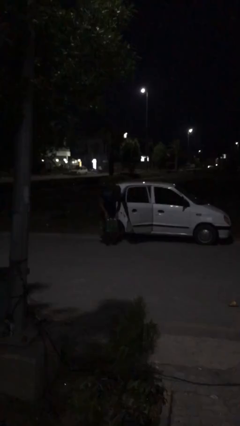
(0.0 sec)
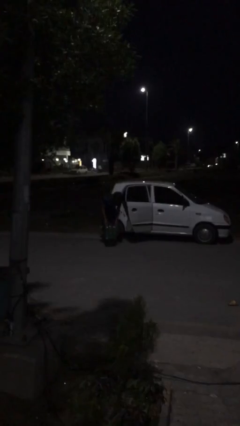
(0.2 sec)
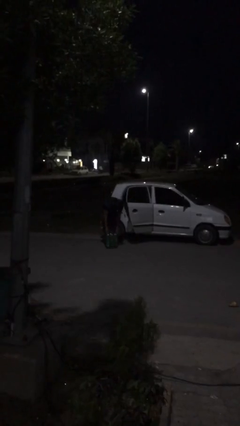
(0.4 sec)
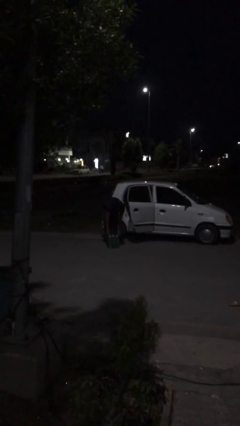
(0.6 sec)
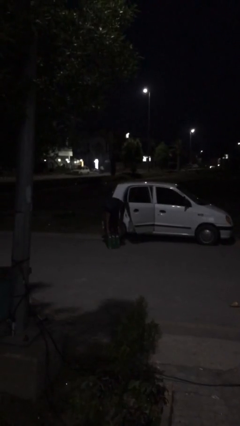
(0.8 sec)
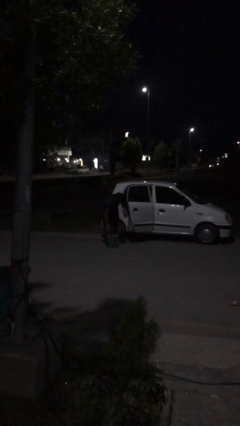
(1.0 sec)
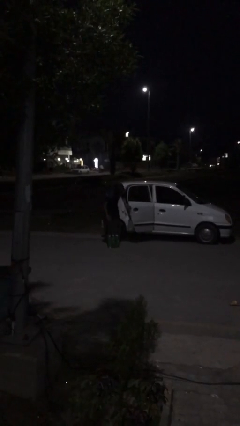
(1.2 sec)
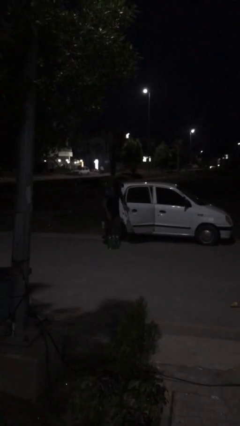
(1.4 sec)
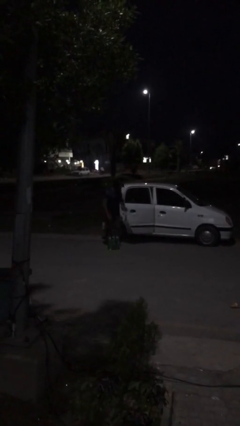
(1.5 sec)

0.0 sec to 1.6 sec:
person unloads car

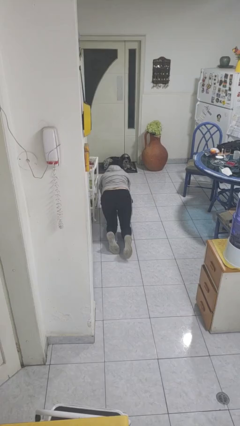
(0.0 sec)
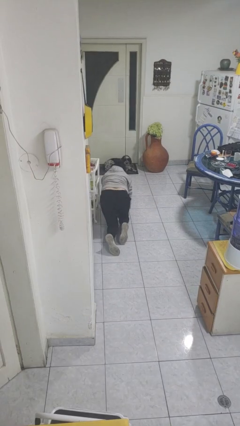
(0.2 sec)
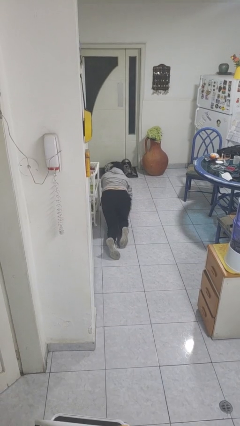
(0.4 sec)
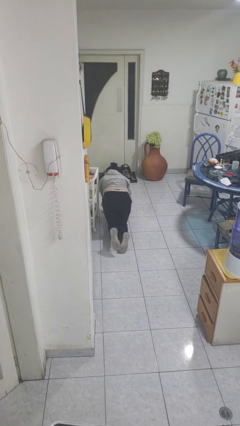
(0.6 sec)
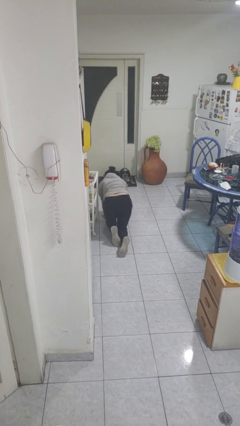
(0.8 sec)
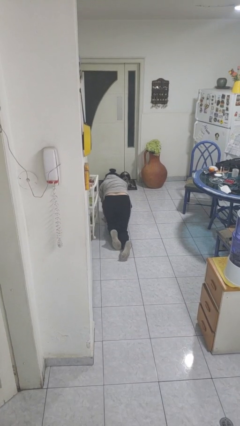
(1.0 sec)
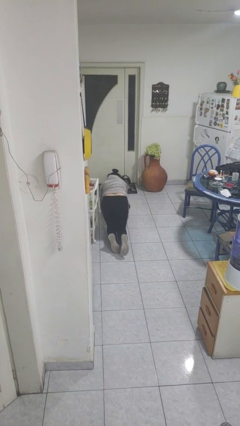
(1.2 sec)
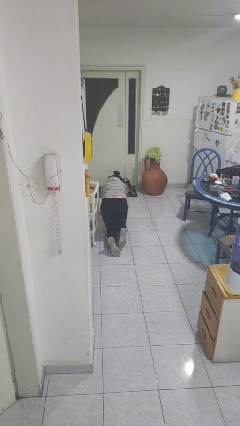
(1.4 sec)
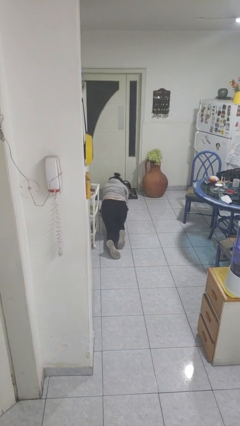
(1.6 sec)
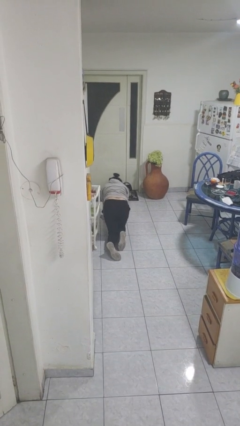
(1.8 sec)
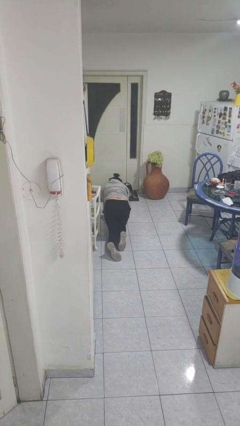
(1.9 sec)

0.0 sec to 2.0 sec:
person crawls

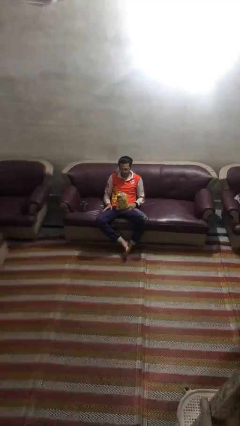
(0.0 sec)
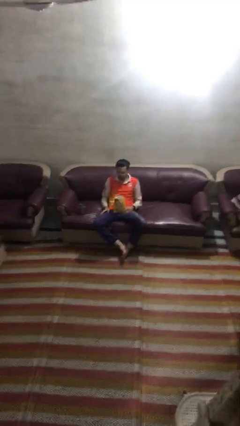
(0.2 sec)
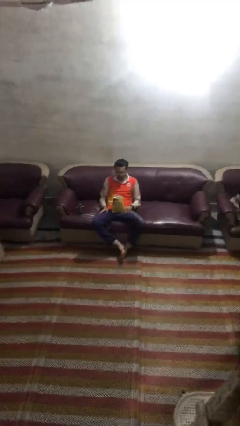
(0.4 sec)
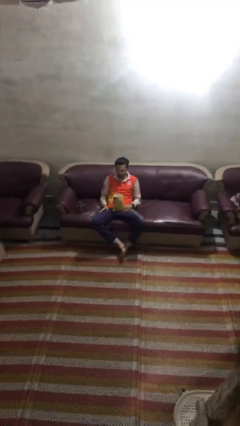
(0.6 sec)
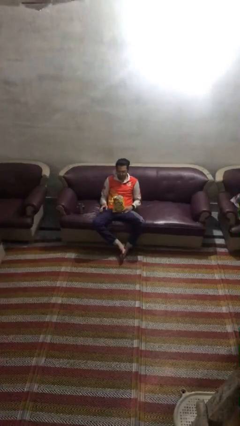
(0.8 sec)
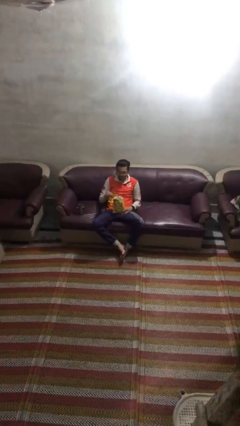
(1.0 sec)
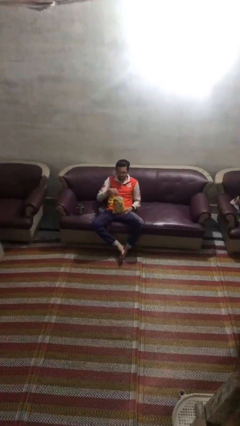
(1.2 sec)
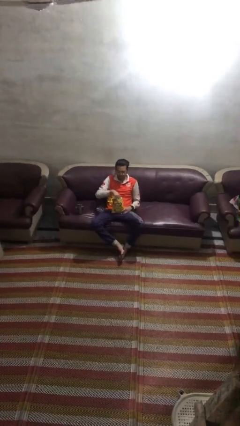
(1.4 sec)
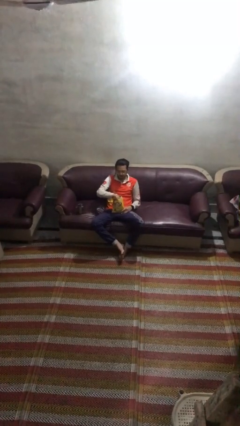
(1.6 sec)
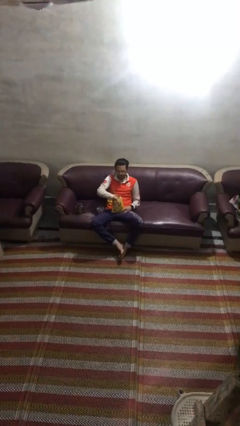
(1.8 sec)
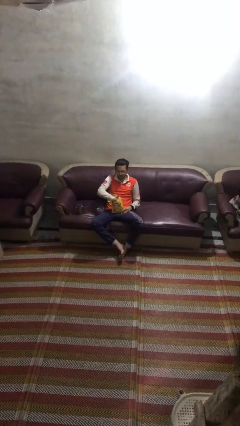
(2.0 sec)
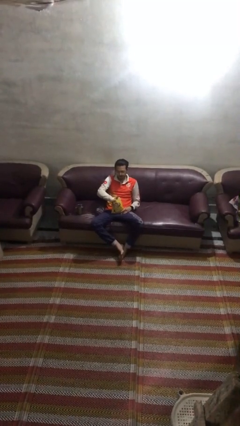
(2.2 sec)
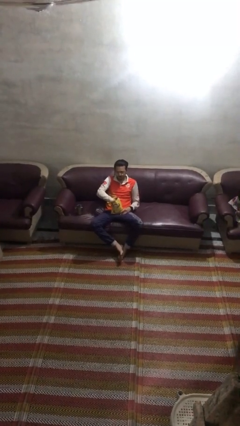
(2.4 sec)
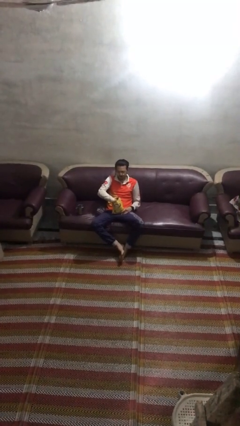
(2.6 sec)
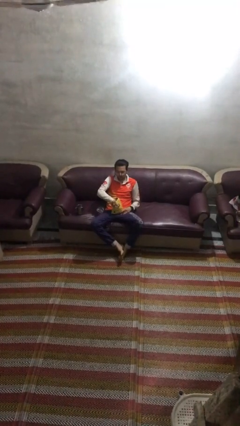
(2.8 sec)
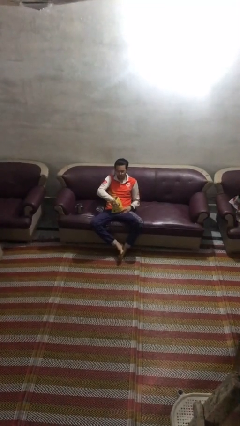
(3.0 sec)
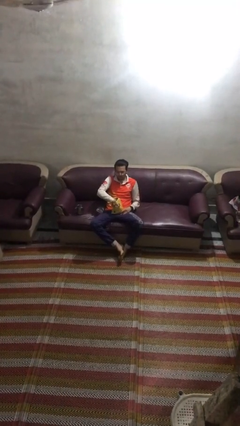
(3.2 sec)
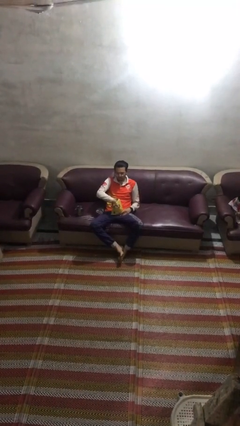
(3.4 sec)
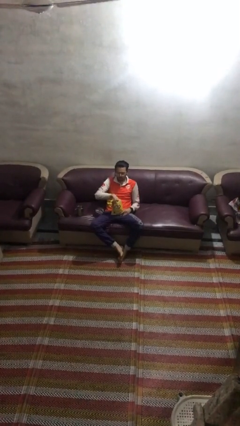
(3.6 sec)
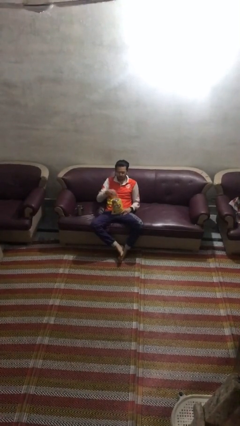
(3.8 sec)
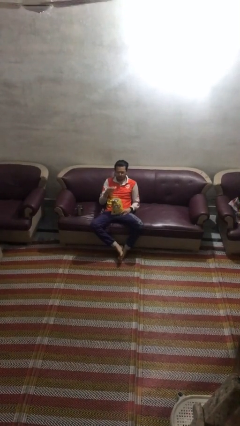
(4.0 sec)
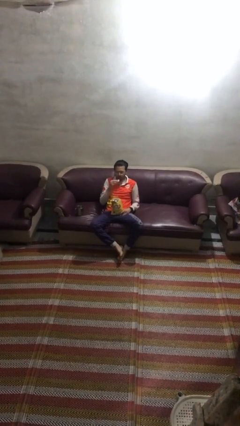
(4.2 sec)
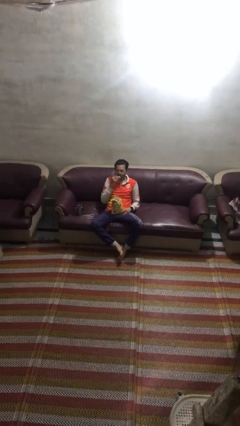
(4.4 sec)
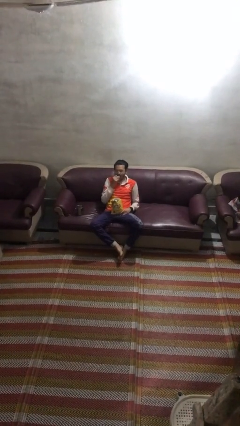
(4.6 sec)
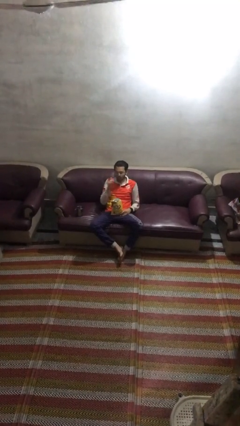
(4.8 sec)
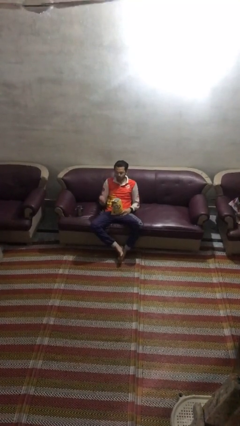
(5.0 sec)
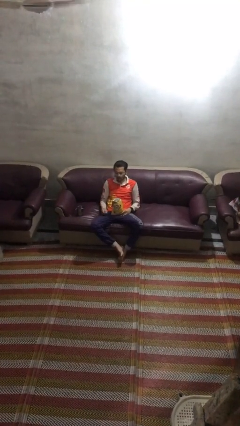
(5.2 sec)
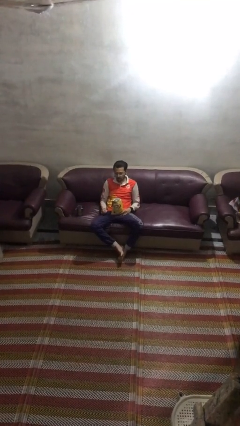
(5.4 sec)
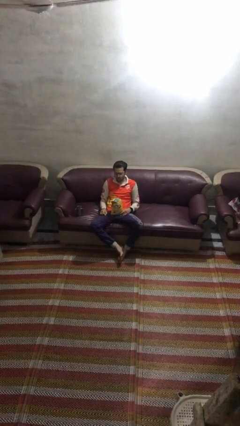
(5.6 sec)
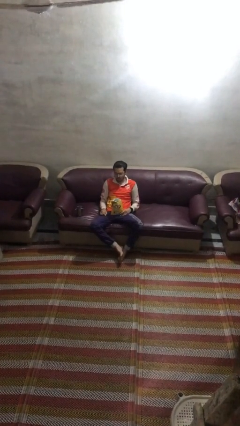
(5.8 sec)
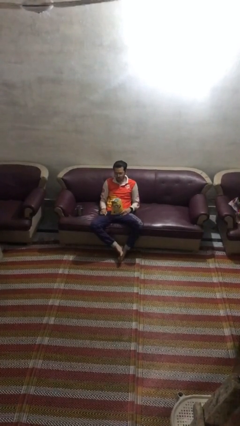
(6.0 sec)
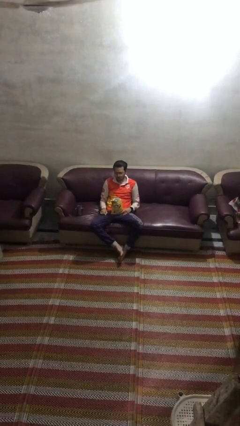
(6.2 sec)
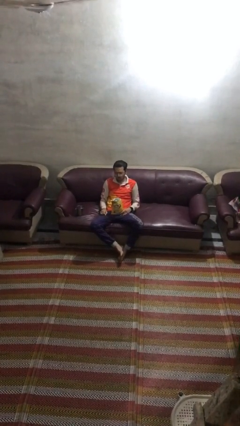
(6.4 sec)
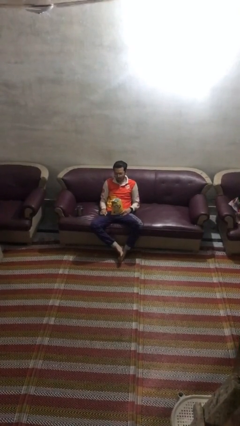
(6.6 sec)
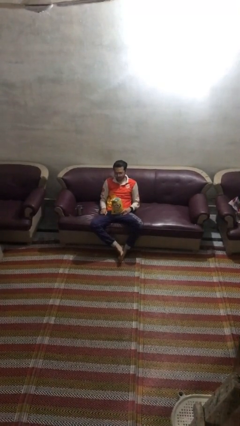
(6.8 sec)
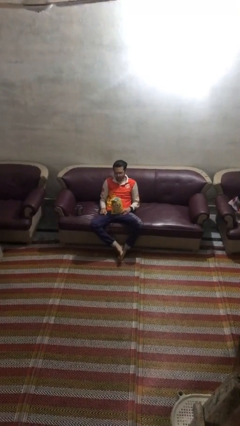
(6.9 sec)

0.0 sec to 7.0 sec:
person eats snack from bag

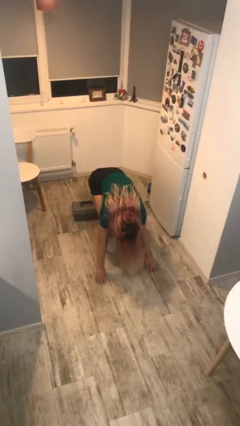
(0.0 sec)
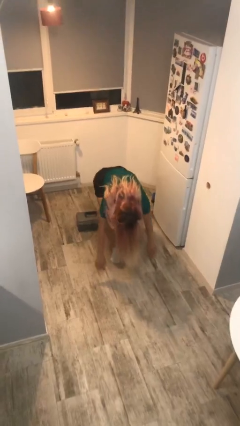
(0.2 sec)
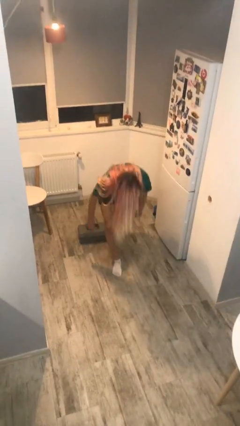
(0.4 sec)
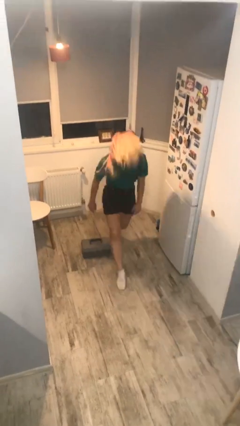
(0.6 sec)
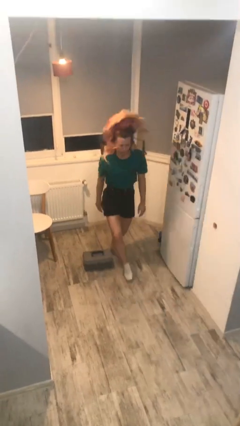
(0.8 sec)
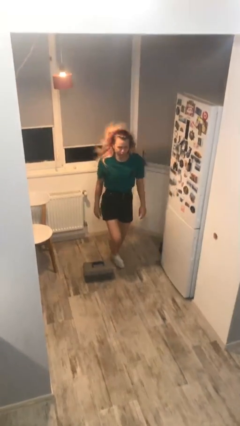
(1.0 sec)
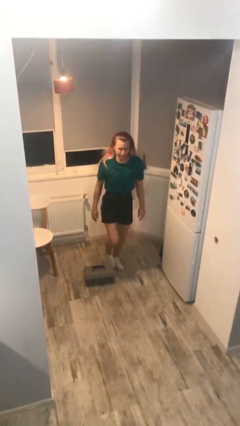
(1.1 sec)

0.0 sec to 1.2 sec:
person stands up from floor

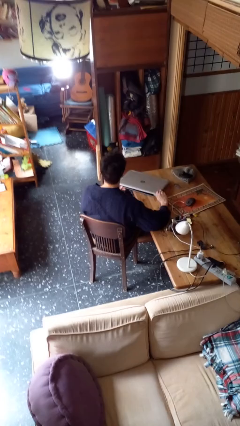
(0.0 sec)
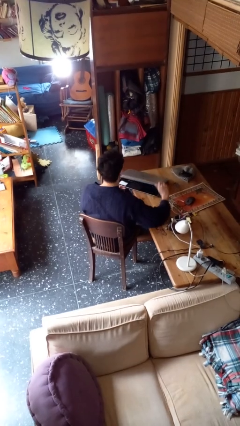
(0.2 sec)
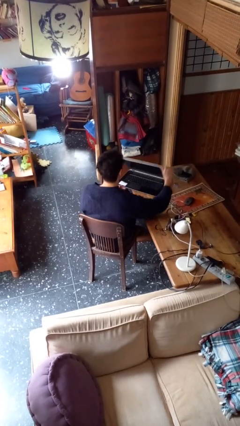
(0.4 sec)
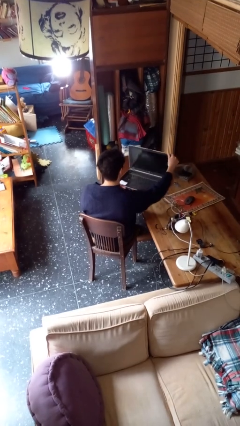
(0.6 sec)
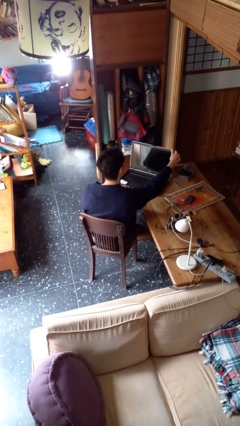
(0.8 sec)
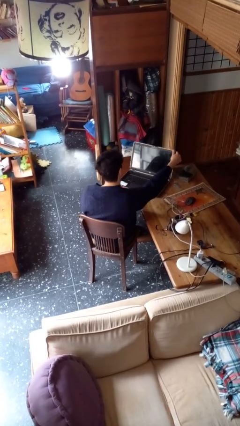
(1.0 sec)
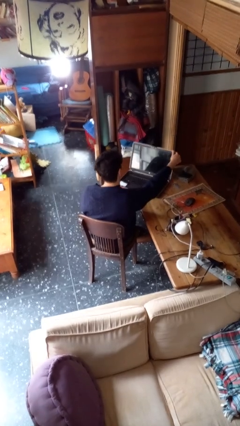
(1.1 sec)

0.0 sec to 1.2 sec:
person opens laptop

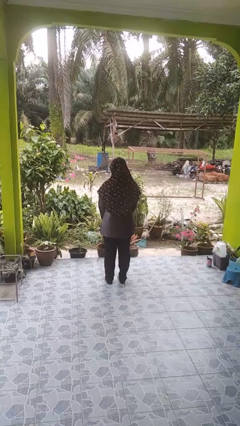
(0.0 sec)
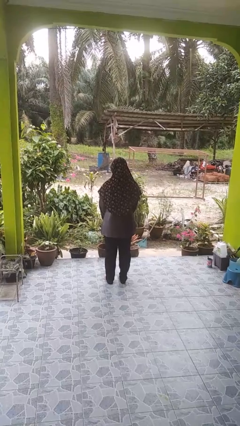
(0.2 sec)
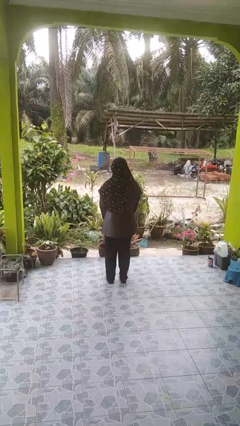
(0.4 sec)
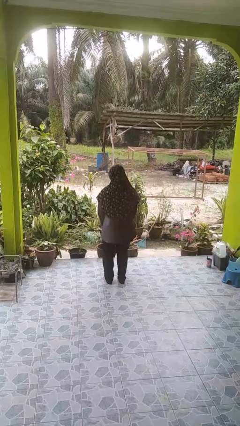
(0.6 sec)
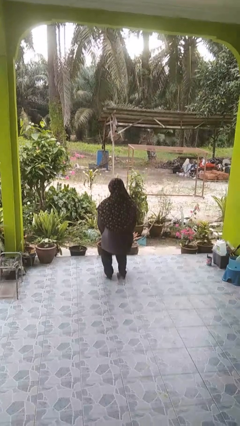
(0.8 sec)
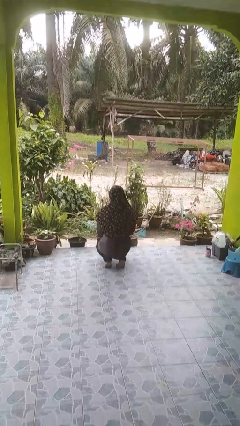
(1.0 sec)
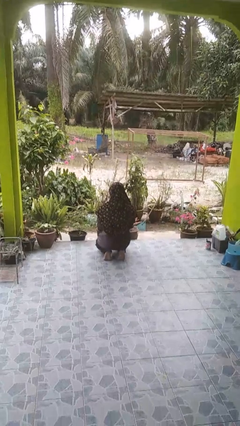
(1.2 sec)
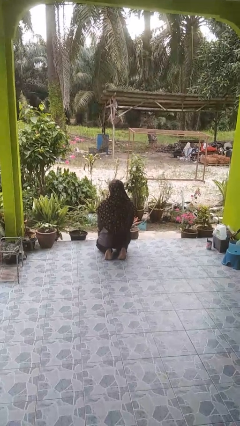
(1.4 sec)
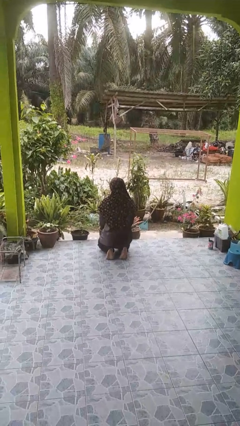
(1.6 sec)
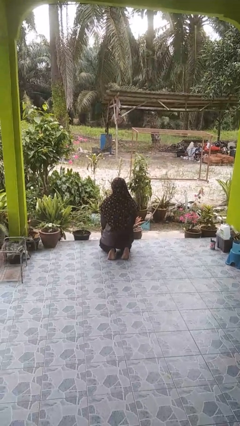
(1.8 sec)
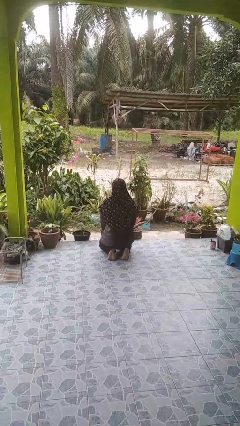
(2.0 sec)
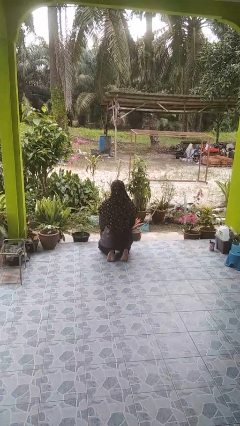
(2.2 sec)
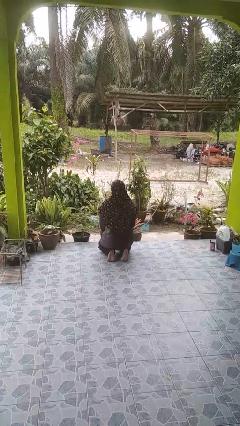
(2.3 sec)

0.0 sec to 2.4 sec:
person kneels

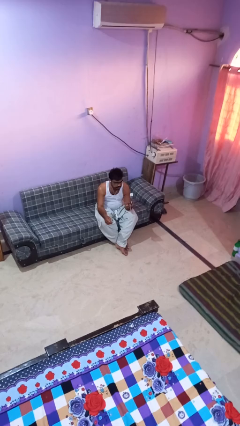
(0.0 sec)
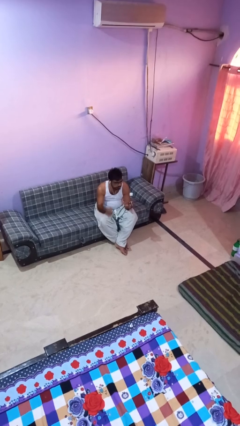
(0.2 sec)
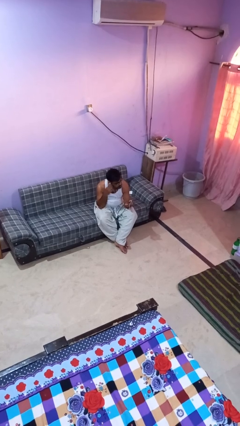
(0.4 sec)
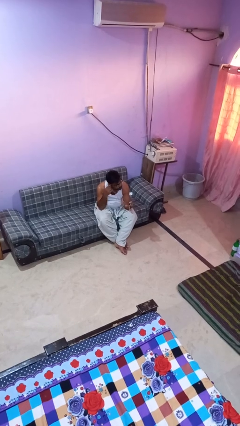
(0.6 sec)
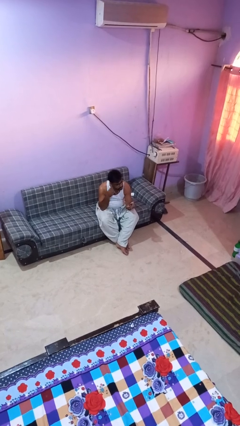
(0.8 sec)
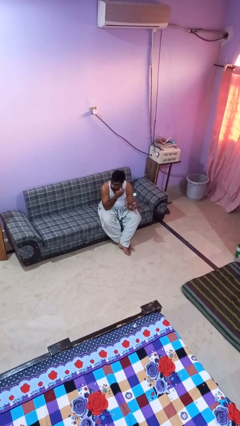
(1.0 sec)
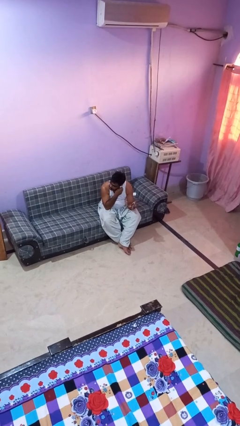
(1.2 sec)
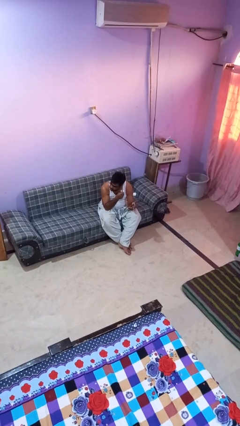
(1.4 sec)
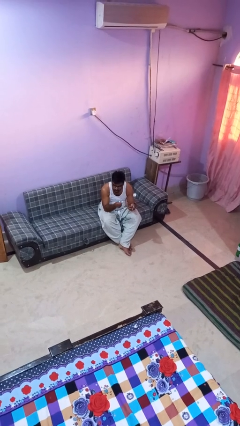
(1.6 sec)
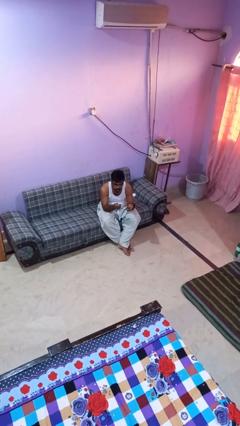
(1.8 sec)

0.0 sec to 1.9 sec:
person takes off headphones
